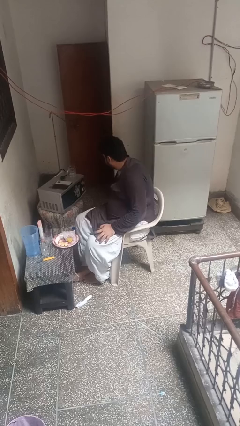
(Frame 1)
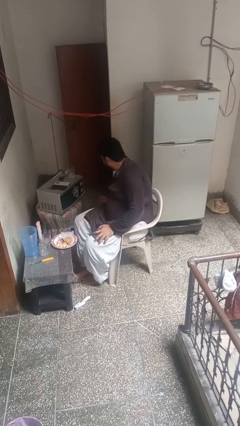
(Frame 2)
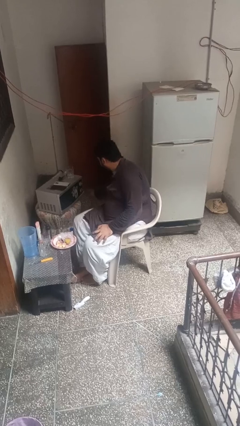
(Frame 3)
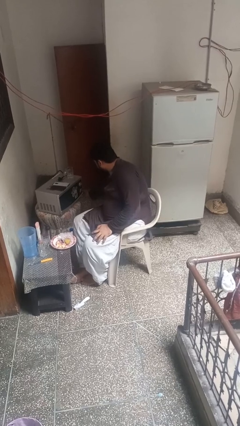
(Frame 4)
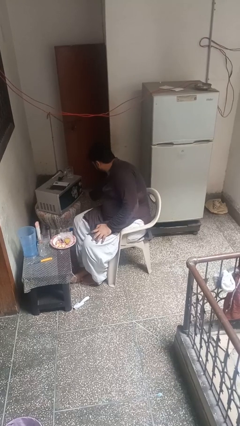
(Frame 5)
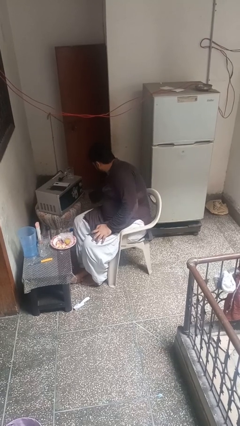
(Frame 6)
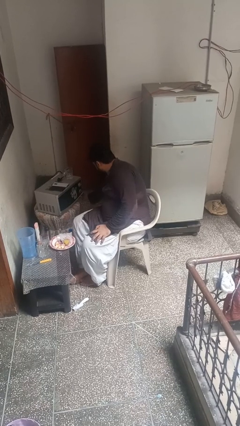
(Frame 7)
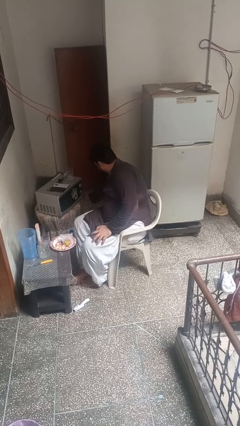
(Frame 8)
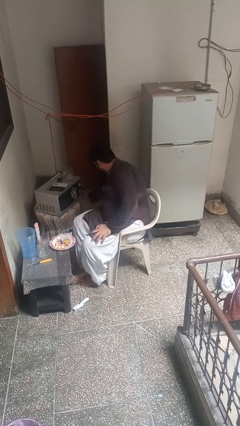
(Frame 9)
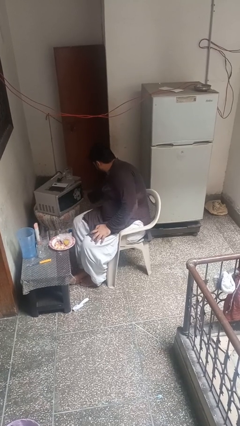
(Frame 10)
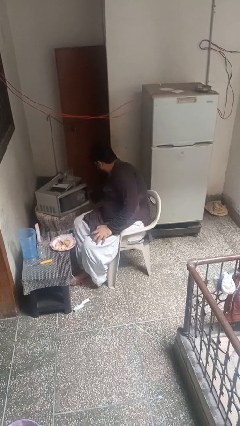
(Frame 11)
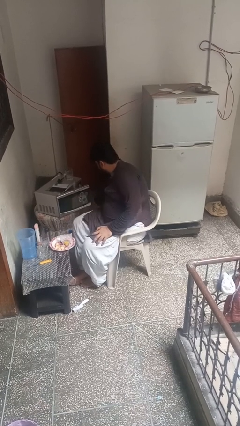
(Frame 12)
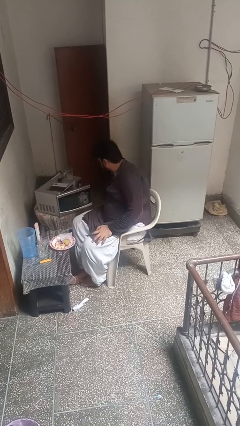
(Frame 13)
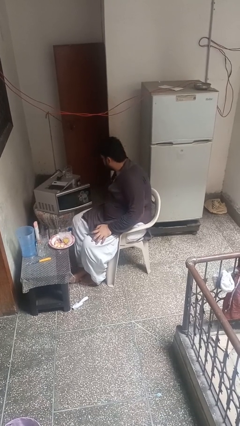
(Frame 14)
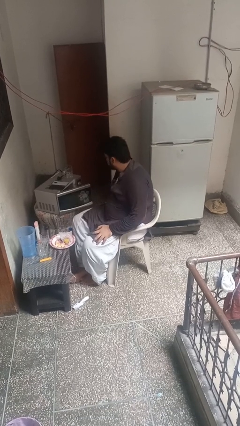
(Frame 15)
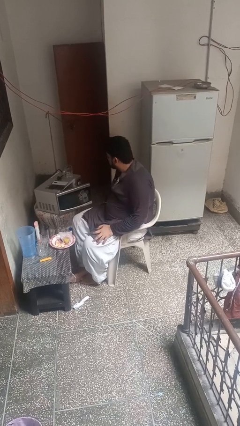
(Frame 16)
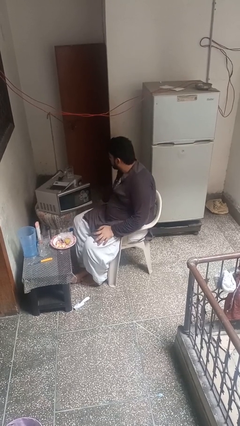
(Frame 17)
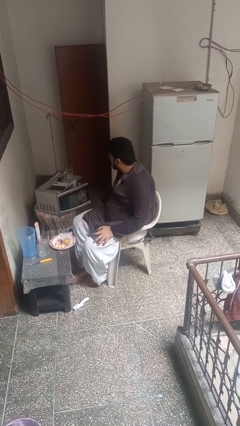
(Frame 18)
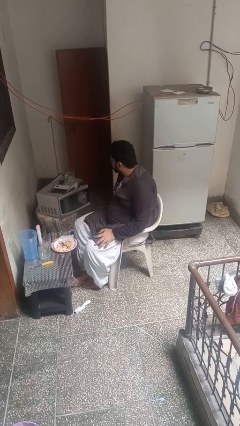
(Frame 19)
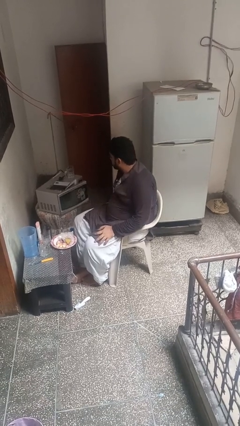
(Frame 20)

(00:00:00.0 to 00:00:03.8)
person opens microwave

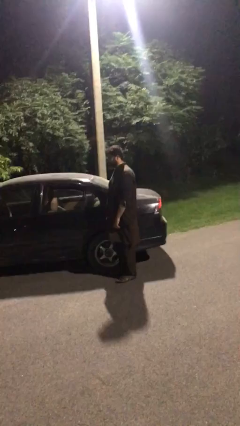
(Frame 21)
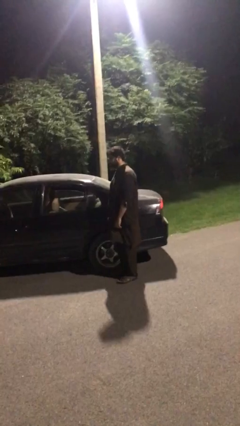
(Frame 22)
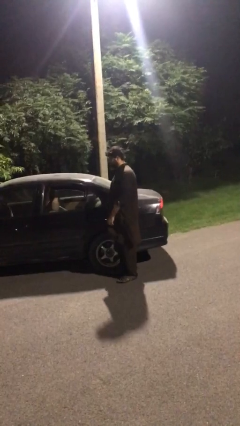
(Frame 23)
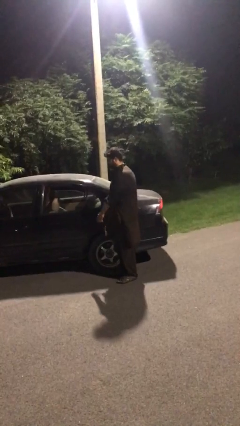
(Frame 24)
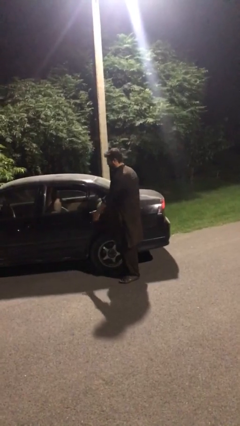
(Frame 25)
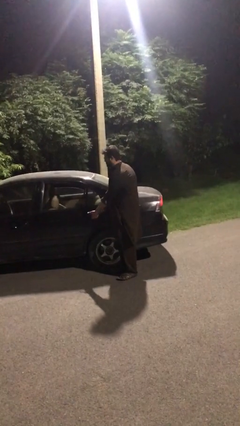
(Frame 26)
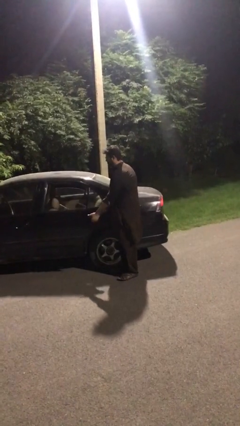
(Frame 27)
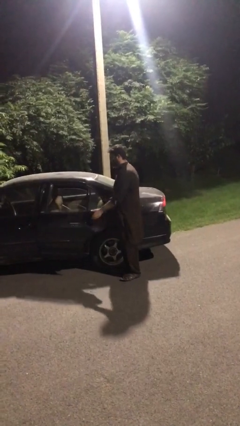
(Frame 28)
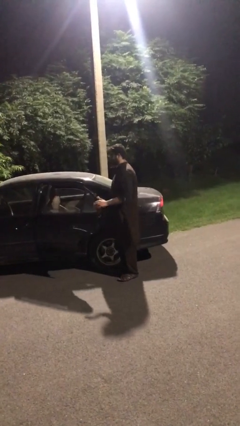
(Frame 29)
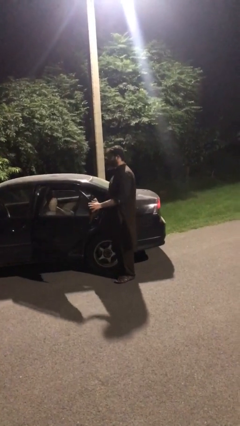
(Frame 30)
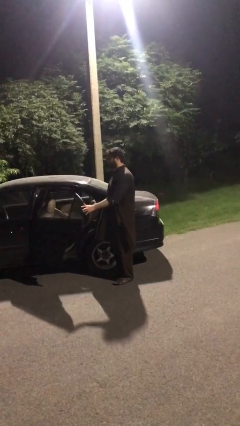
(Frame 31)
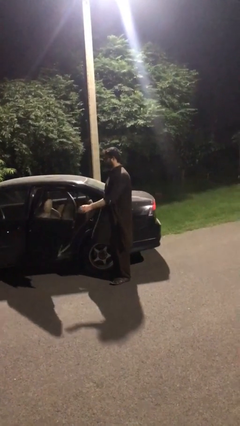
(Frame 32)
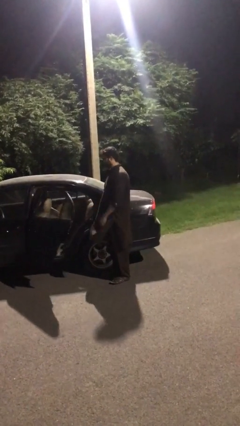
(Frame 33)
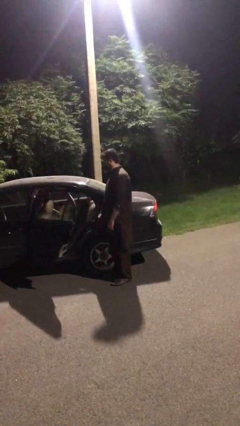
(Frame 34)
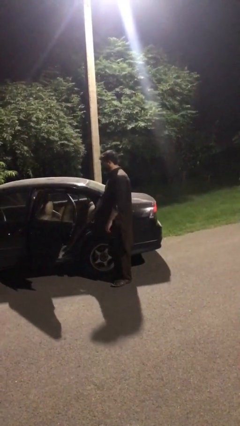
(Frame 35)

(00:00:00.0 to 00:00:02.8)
person opens car door

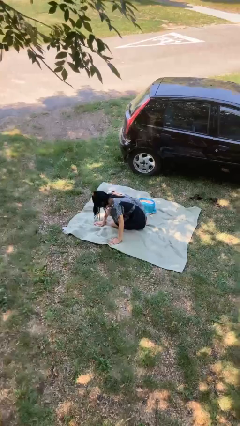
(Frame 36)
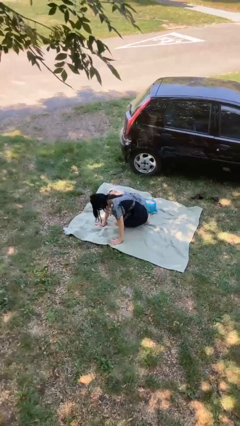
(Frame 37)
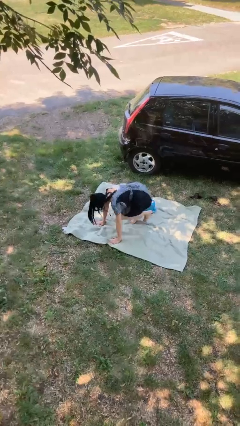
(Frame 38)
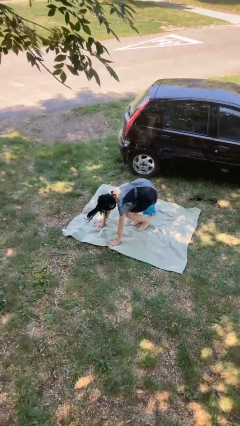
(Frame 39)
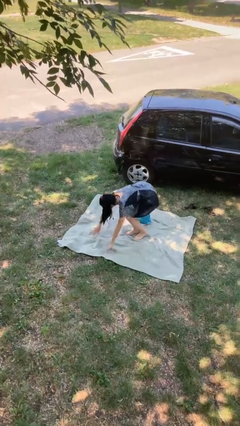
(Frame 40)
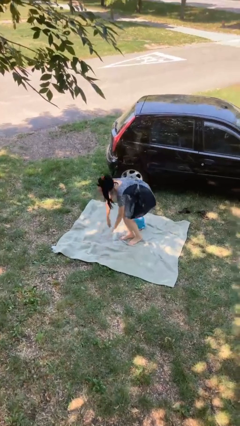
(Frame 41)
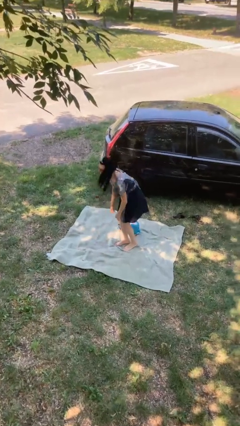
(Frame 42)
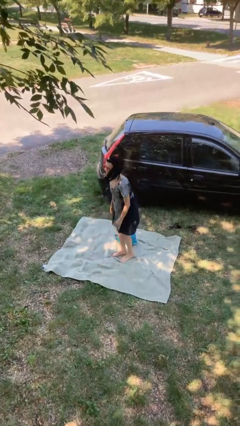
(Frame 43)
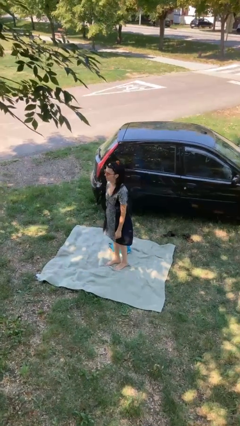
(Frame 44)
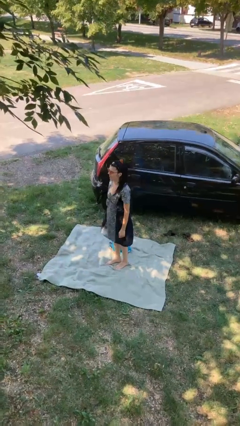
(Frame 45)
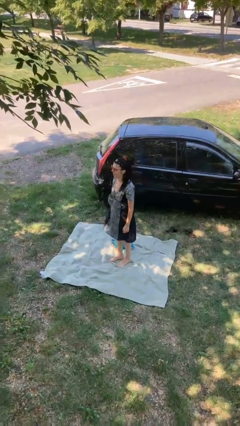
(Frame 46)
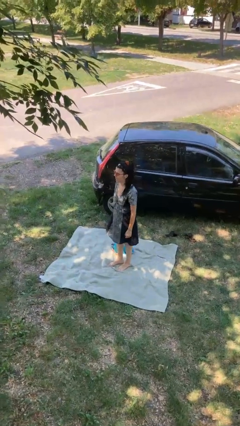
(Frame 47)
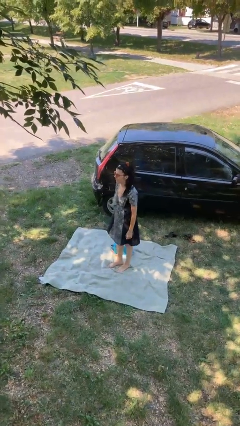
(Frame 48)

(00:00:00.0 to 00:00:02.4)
person stands up from floor

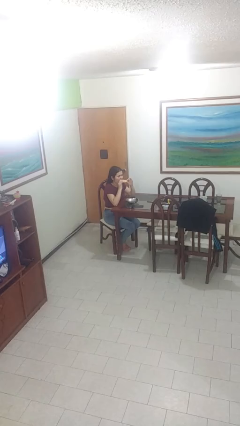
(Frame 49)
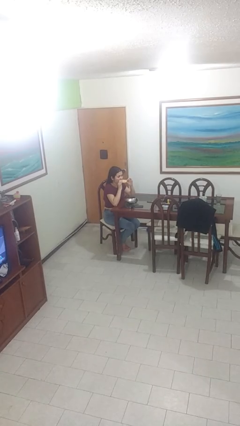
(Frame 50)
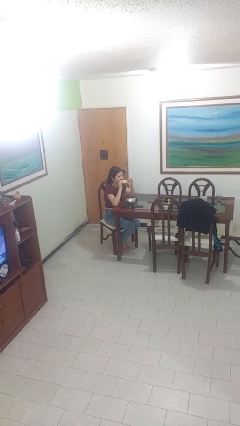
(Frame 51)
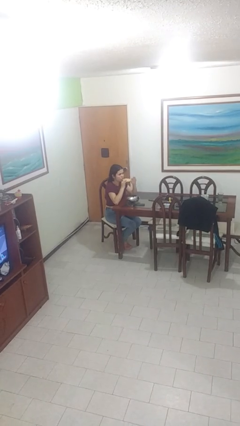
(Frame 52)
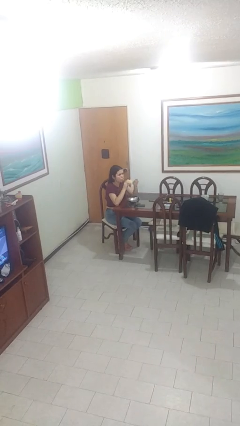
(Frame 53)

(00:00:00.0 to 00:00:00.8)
person eats with hands

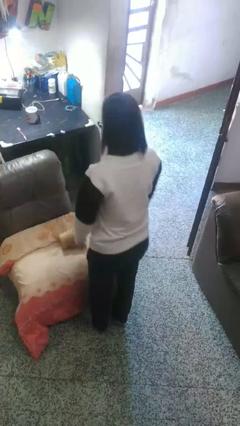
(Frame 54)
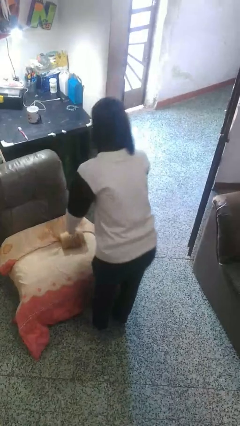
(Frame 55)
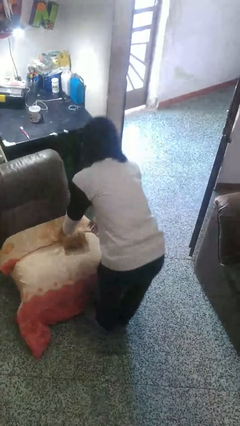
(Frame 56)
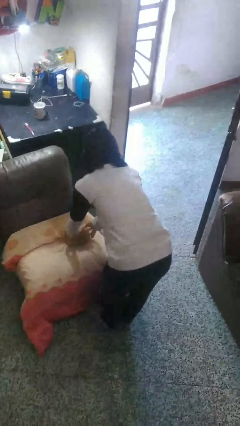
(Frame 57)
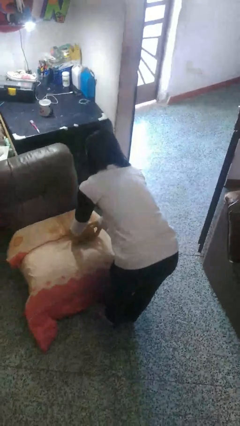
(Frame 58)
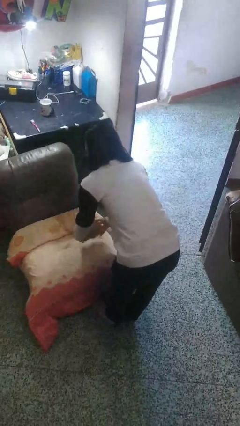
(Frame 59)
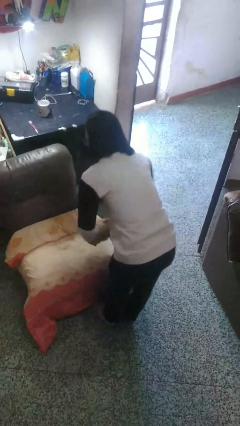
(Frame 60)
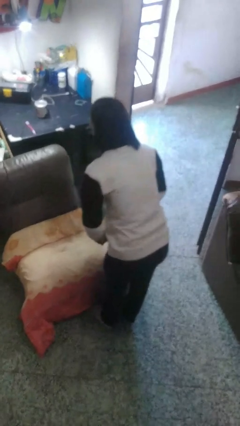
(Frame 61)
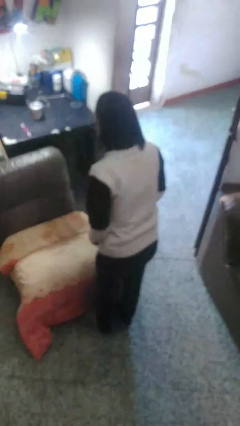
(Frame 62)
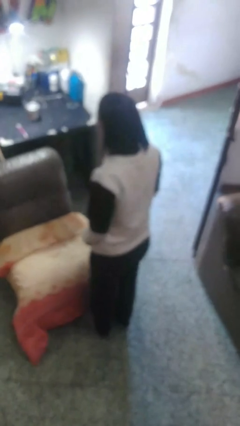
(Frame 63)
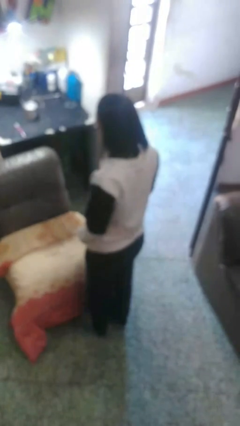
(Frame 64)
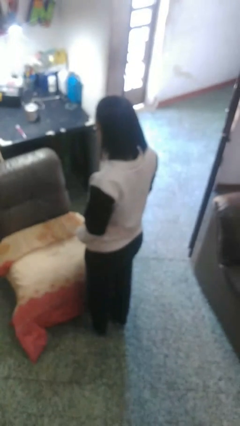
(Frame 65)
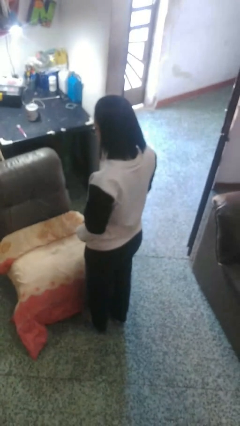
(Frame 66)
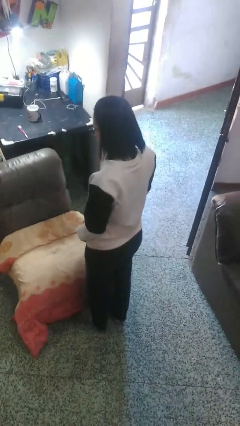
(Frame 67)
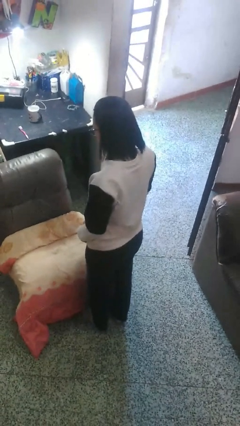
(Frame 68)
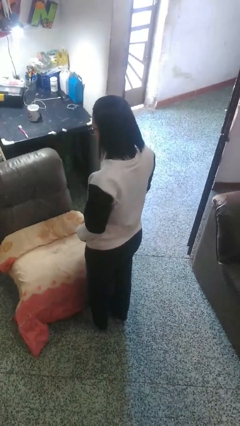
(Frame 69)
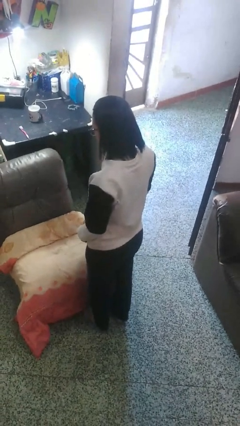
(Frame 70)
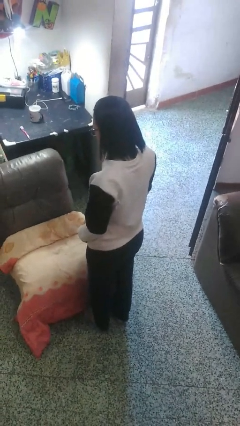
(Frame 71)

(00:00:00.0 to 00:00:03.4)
person picks up object from couch

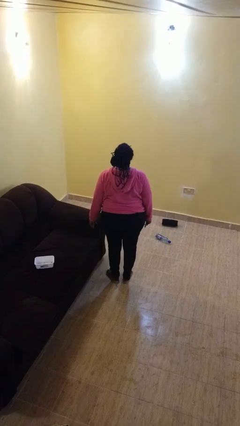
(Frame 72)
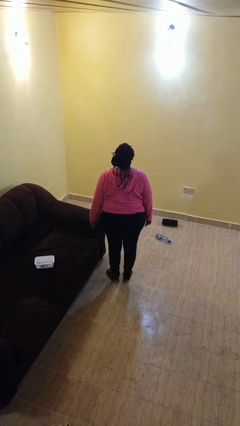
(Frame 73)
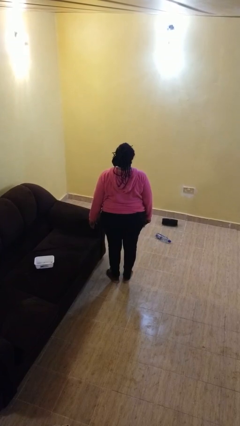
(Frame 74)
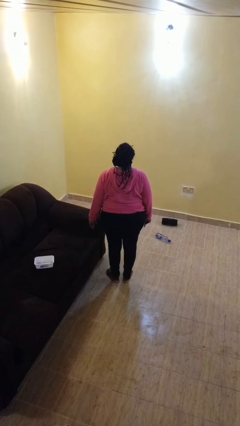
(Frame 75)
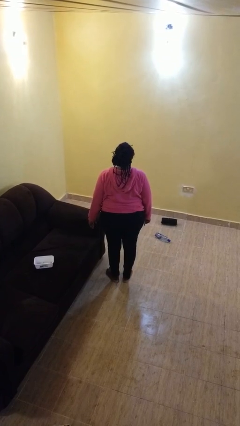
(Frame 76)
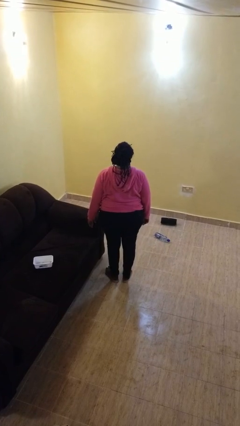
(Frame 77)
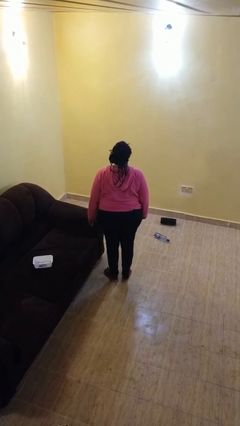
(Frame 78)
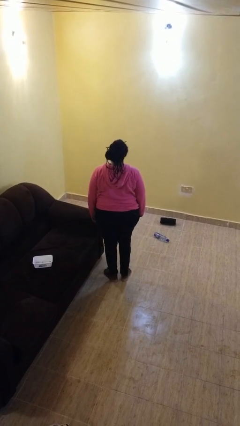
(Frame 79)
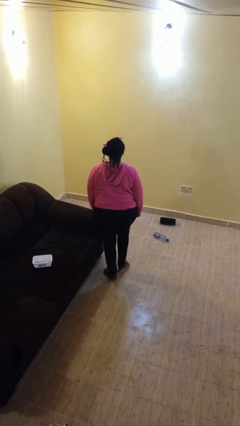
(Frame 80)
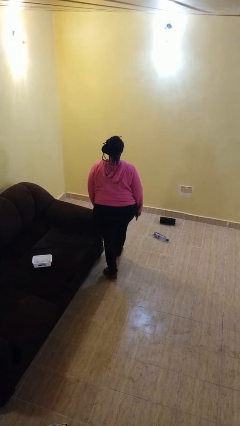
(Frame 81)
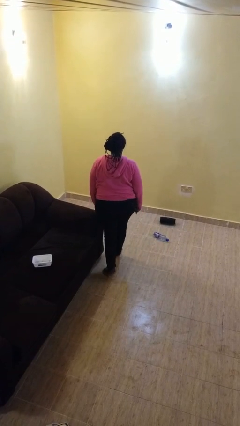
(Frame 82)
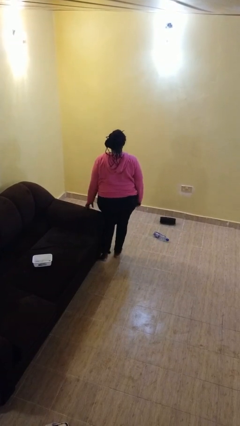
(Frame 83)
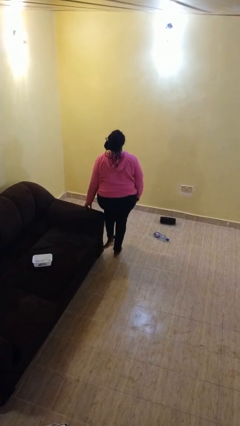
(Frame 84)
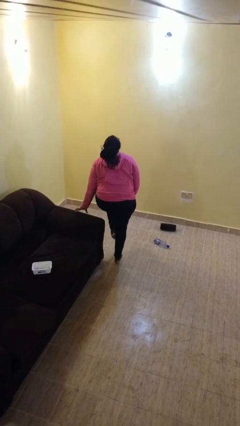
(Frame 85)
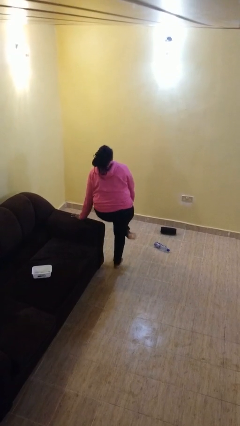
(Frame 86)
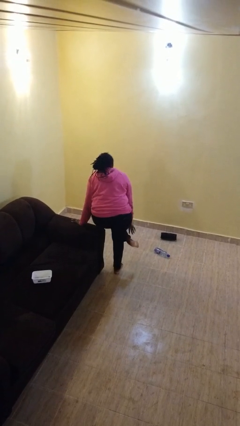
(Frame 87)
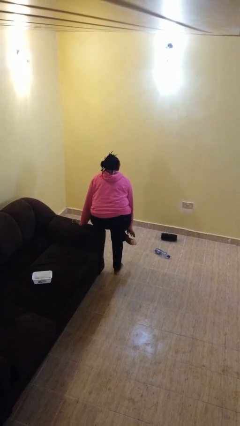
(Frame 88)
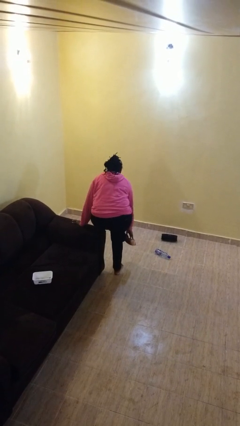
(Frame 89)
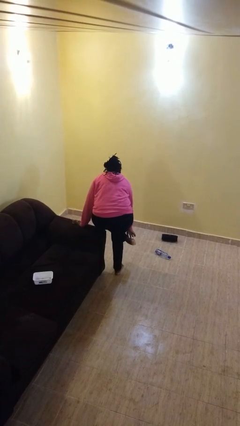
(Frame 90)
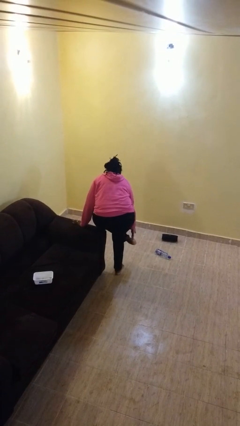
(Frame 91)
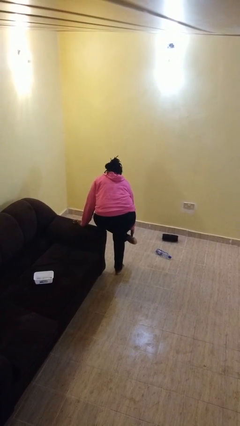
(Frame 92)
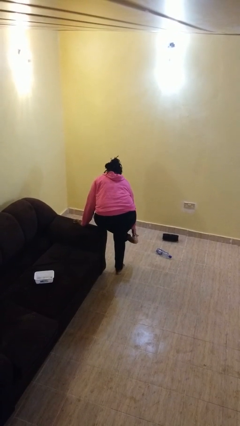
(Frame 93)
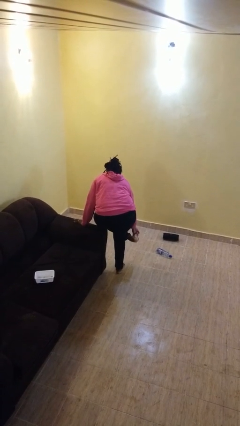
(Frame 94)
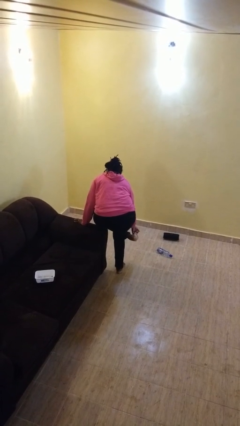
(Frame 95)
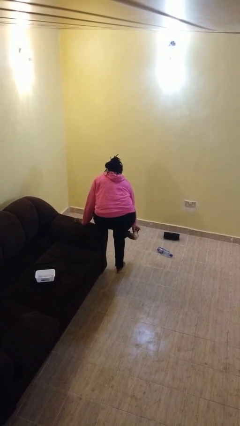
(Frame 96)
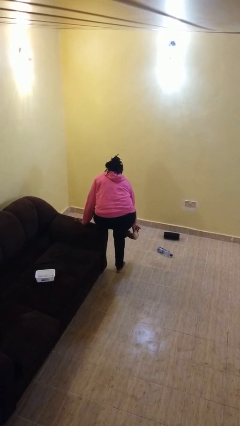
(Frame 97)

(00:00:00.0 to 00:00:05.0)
person stubs toe
